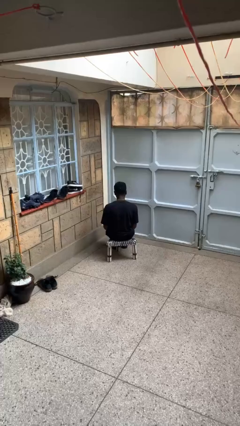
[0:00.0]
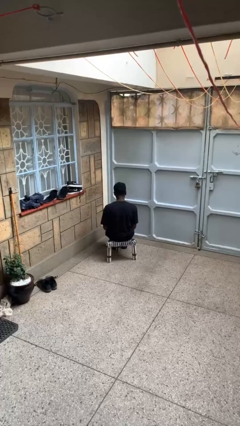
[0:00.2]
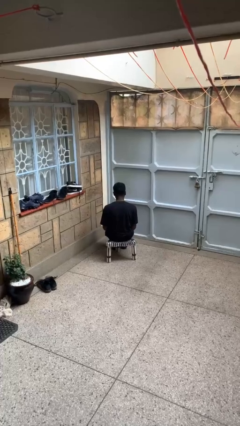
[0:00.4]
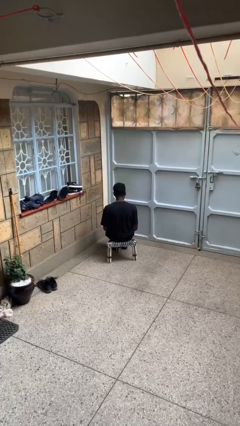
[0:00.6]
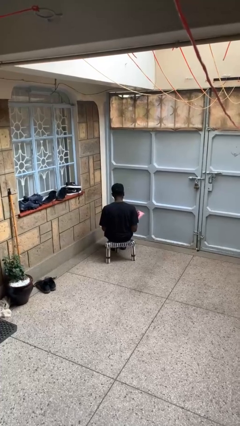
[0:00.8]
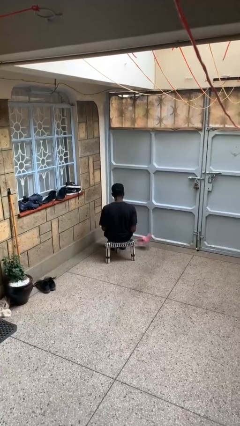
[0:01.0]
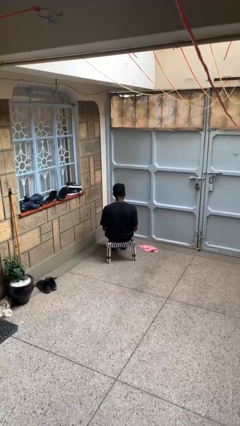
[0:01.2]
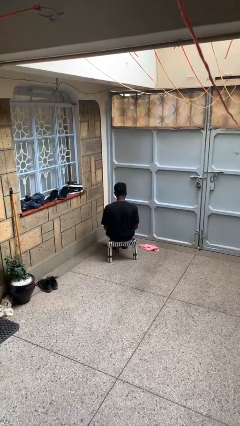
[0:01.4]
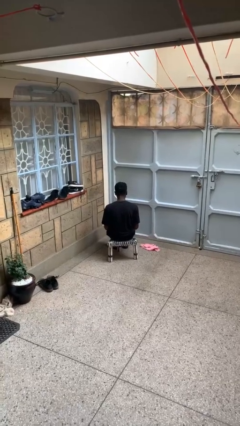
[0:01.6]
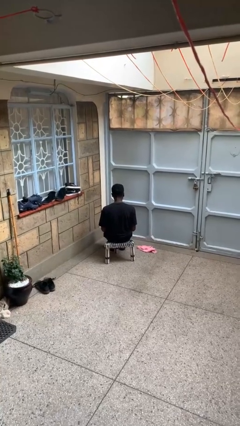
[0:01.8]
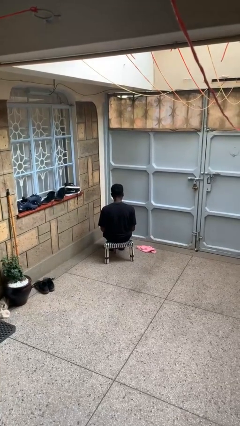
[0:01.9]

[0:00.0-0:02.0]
person throws object to ground

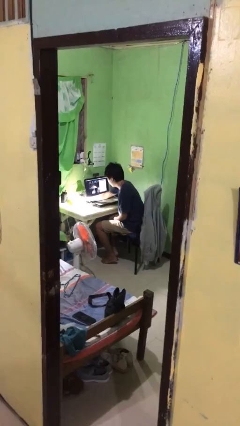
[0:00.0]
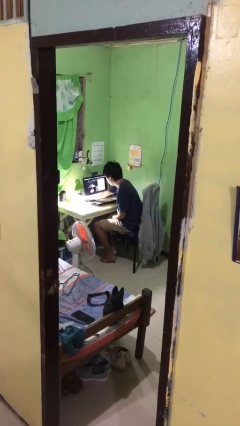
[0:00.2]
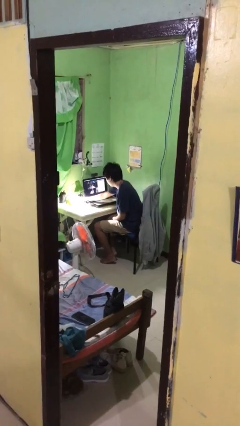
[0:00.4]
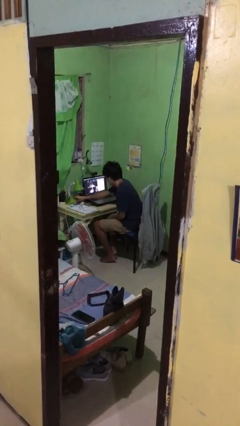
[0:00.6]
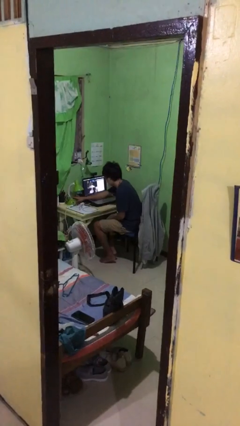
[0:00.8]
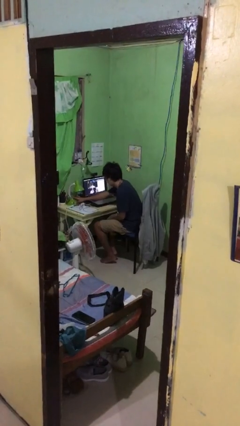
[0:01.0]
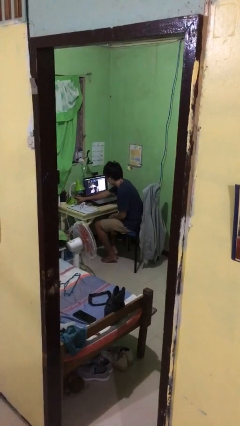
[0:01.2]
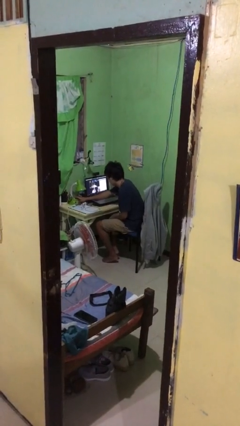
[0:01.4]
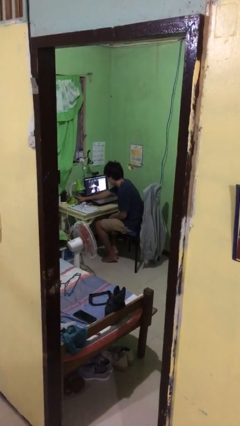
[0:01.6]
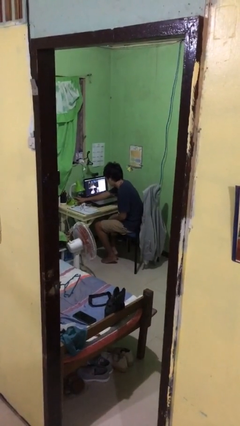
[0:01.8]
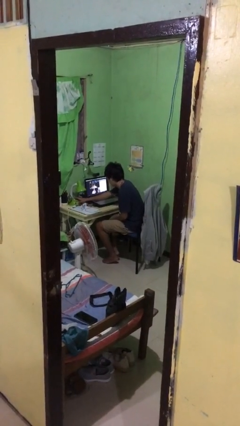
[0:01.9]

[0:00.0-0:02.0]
person turns off lamp

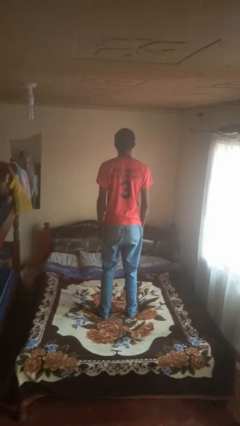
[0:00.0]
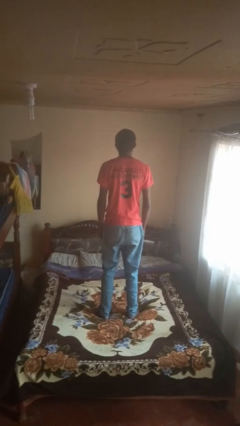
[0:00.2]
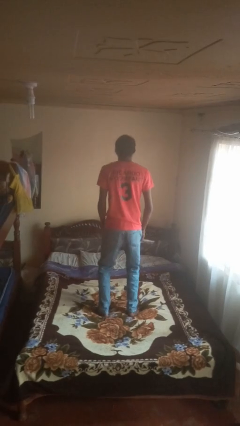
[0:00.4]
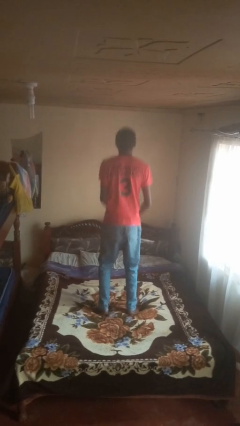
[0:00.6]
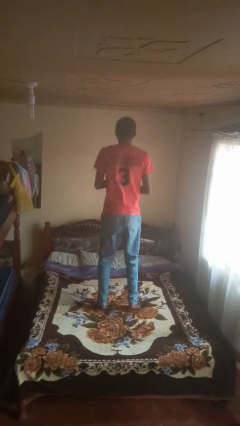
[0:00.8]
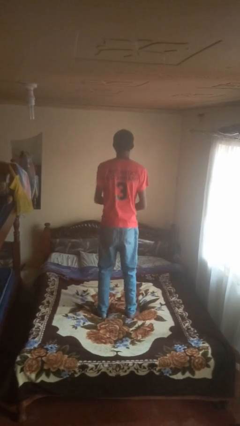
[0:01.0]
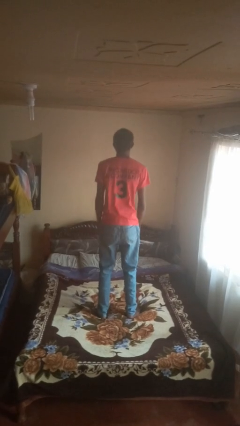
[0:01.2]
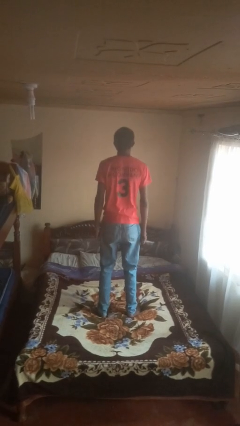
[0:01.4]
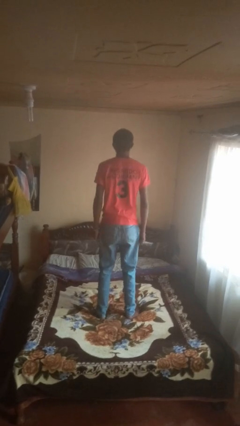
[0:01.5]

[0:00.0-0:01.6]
person jumps on bed

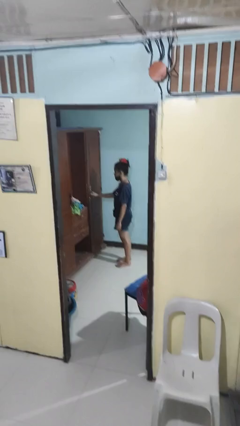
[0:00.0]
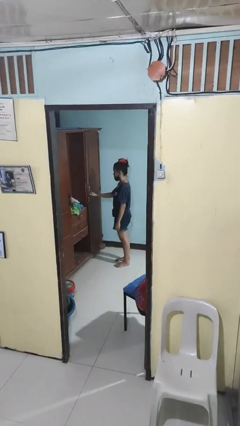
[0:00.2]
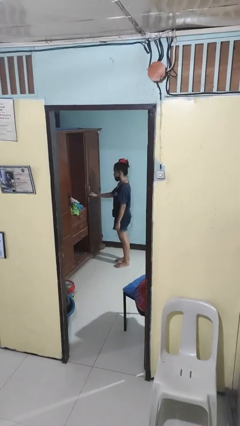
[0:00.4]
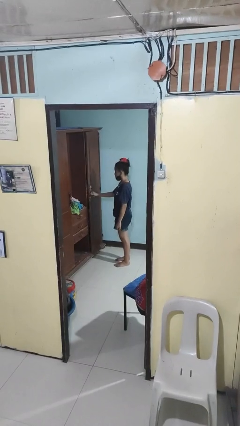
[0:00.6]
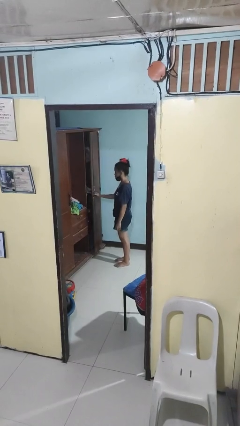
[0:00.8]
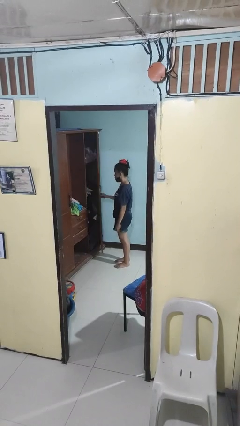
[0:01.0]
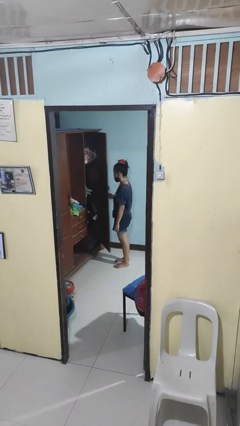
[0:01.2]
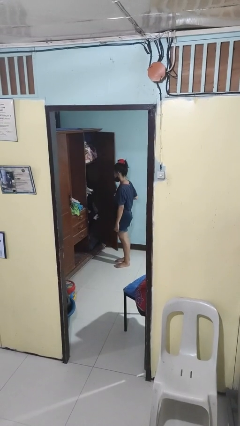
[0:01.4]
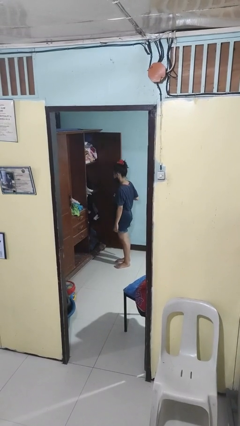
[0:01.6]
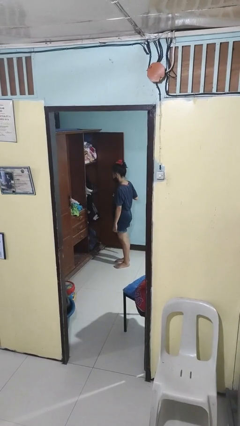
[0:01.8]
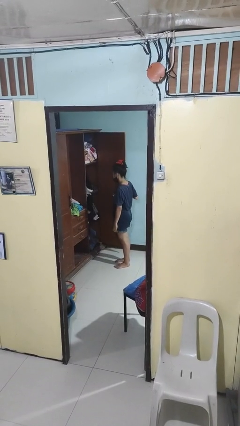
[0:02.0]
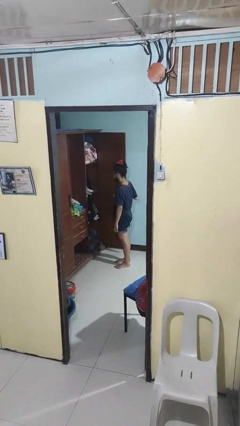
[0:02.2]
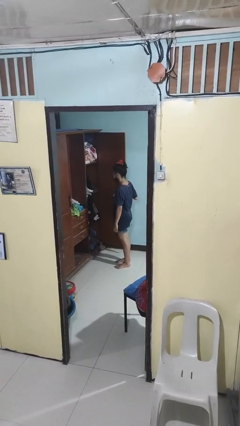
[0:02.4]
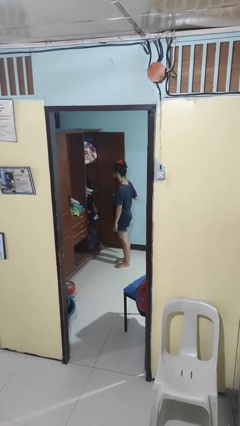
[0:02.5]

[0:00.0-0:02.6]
person opens closet door

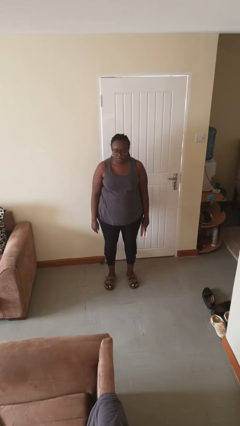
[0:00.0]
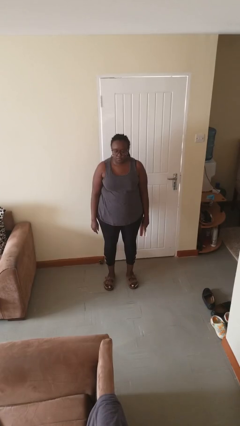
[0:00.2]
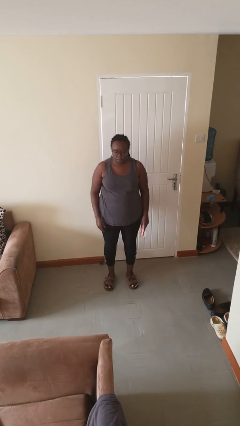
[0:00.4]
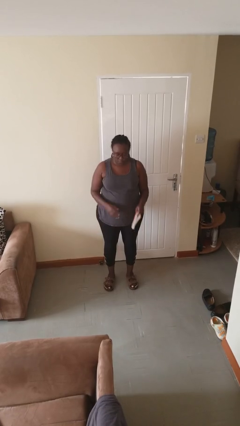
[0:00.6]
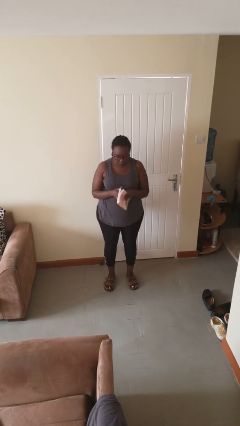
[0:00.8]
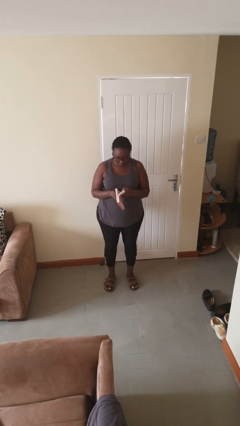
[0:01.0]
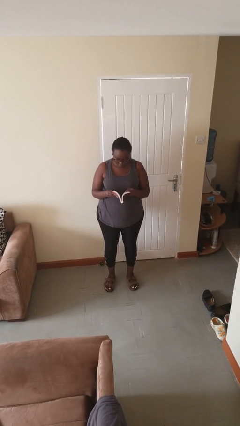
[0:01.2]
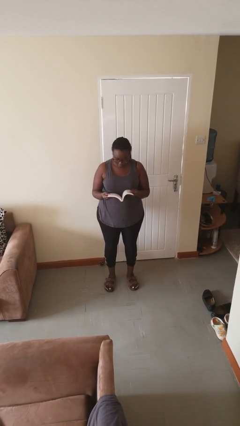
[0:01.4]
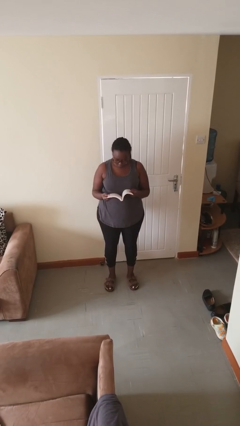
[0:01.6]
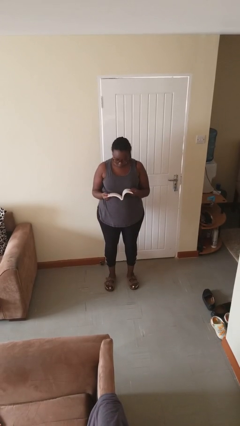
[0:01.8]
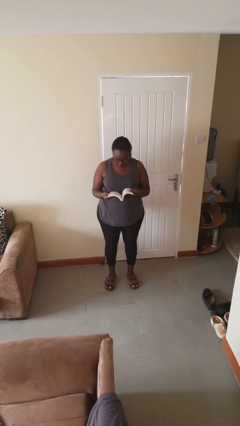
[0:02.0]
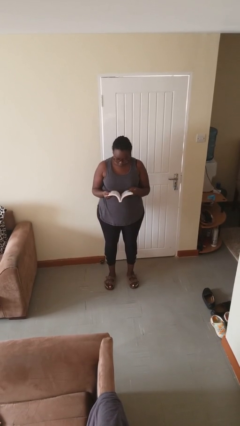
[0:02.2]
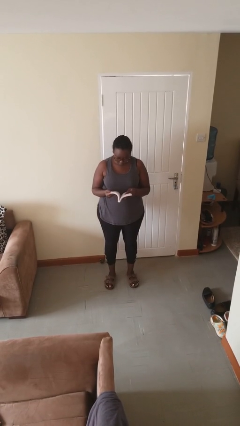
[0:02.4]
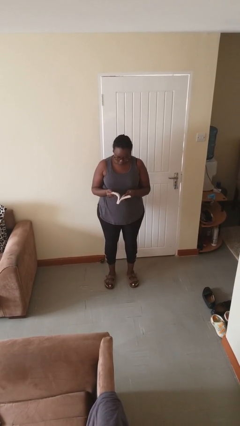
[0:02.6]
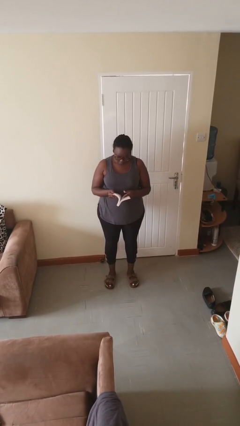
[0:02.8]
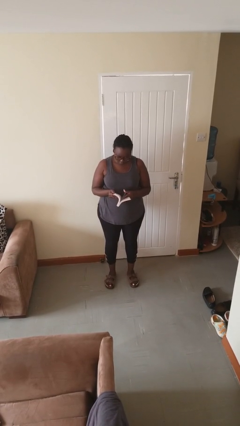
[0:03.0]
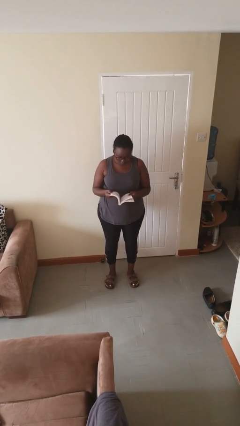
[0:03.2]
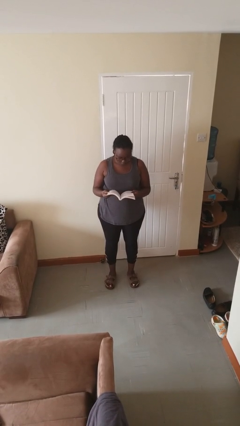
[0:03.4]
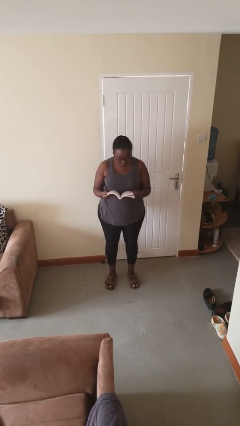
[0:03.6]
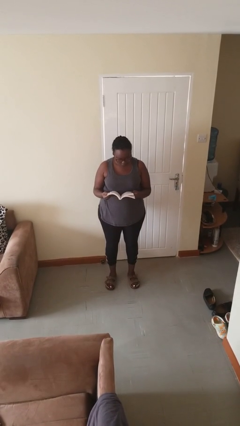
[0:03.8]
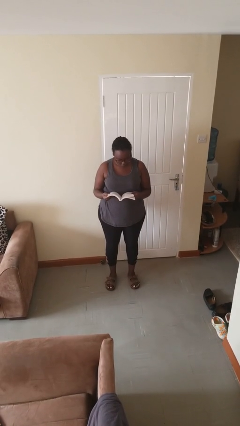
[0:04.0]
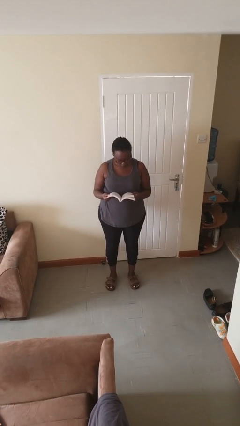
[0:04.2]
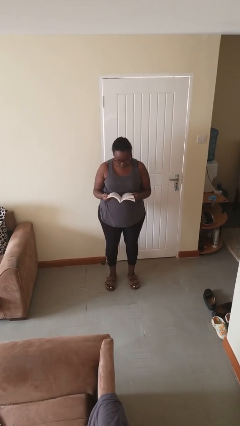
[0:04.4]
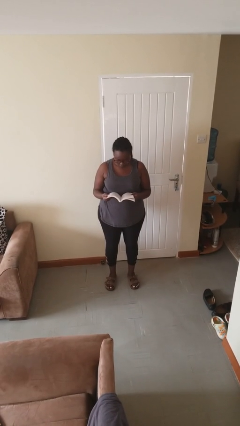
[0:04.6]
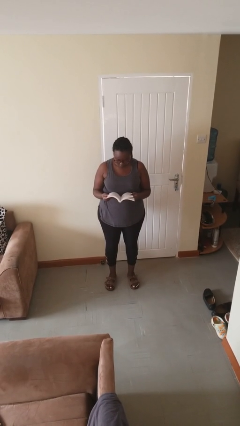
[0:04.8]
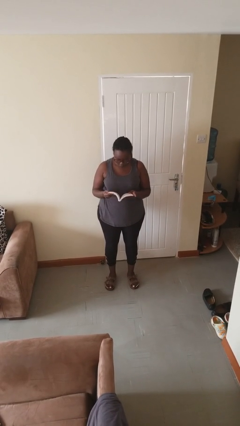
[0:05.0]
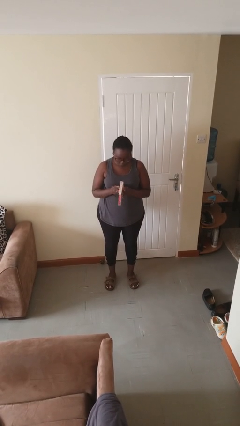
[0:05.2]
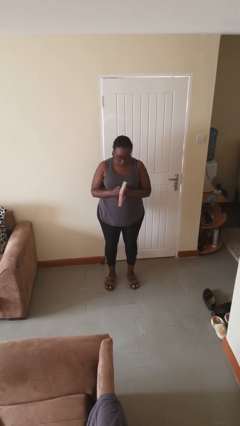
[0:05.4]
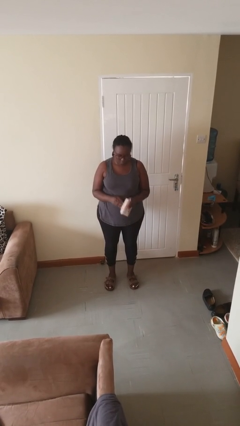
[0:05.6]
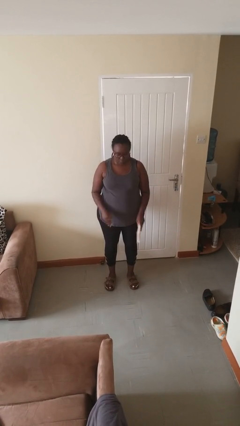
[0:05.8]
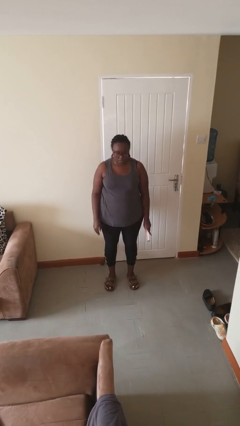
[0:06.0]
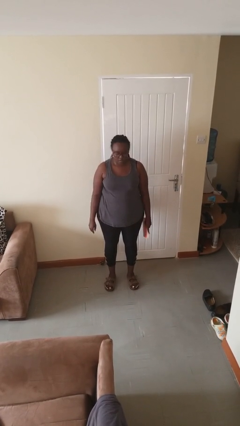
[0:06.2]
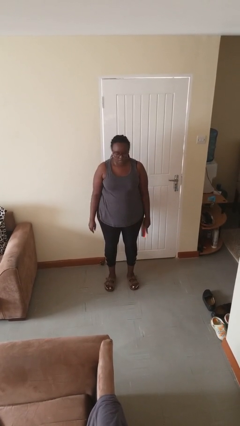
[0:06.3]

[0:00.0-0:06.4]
person reads book

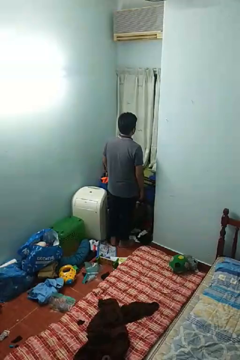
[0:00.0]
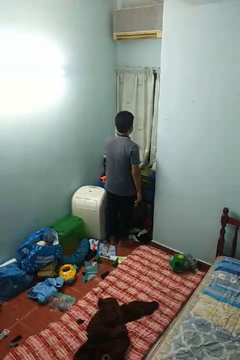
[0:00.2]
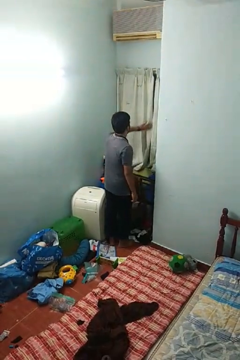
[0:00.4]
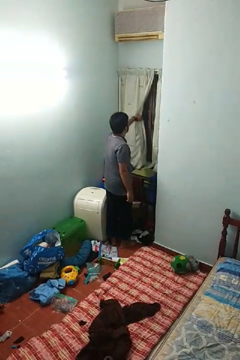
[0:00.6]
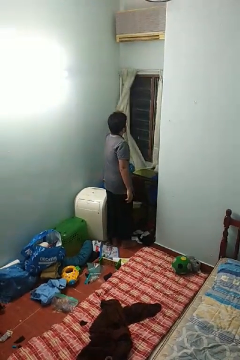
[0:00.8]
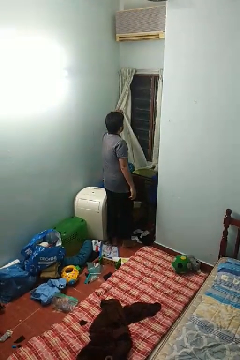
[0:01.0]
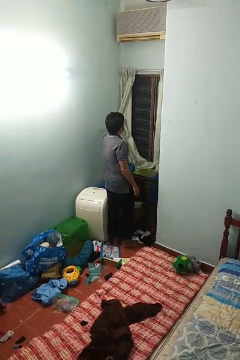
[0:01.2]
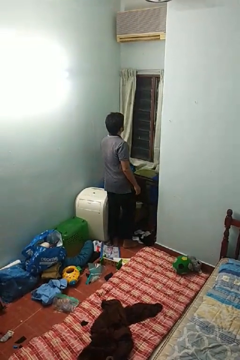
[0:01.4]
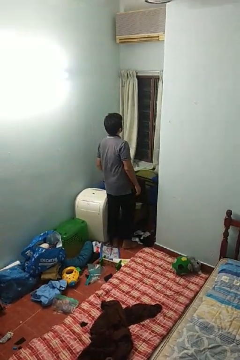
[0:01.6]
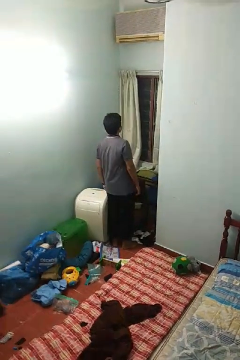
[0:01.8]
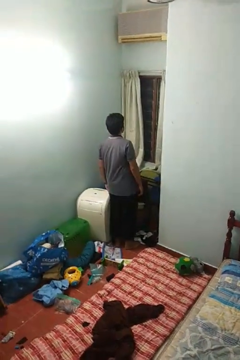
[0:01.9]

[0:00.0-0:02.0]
person opens curtains

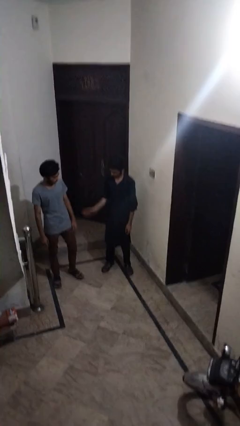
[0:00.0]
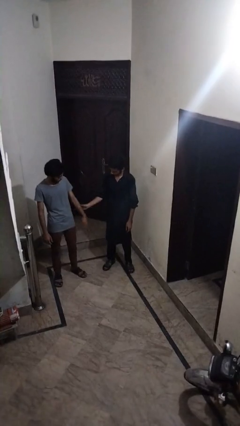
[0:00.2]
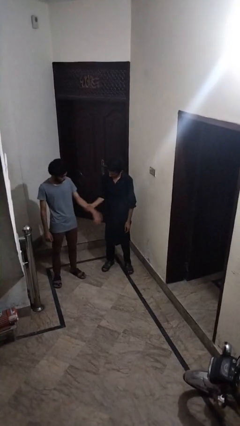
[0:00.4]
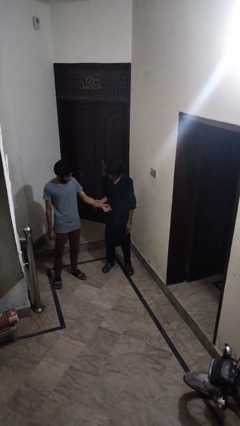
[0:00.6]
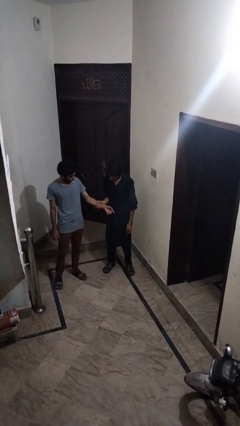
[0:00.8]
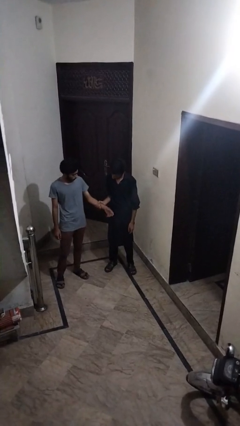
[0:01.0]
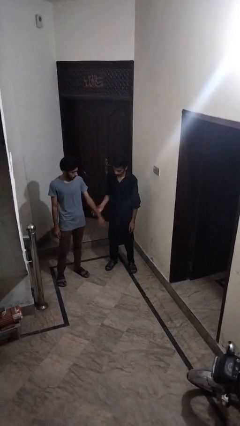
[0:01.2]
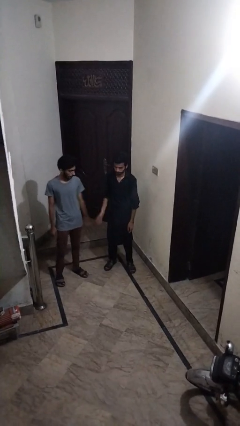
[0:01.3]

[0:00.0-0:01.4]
person grabs person by forearm
